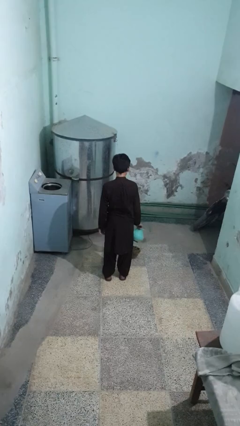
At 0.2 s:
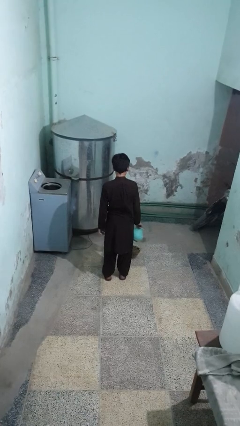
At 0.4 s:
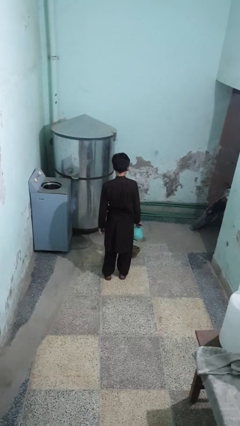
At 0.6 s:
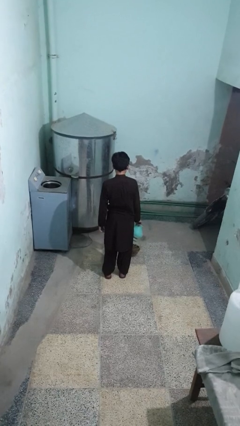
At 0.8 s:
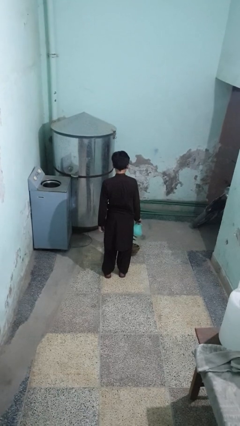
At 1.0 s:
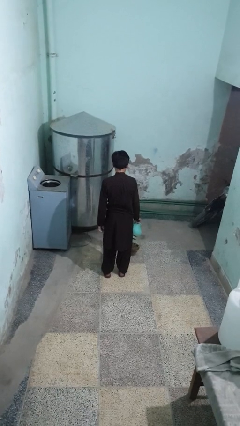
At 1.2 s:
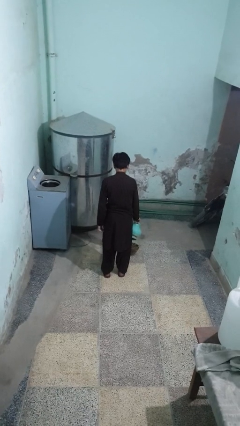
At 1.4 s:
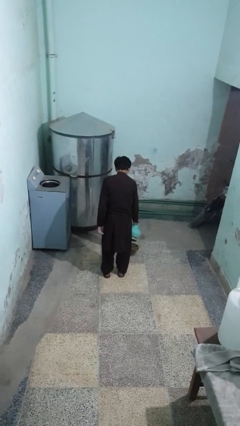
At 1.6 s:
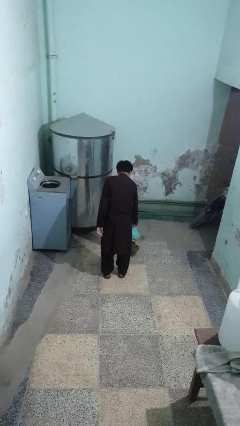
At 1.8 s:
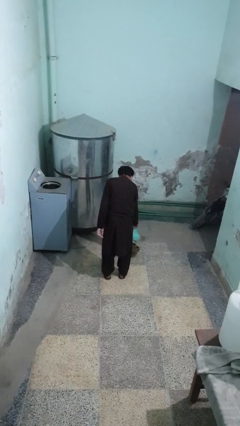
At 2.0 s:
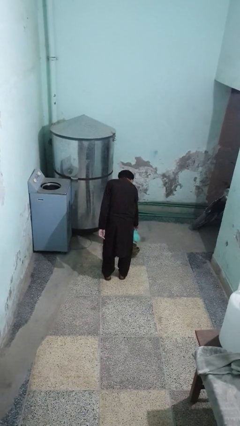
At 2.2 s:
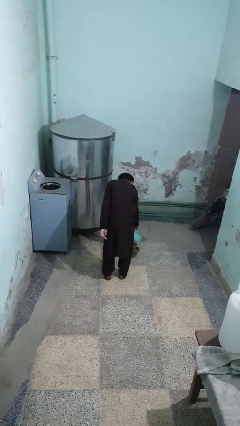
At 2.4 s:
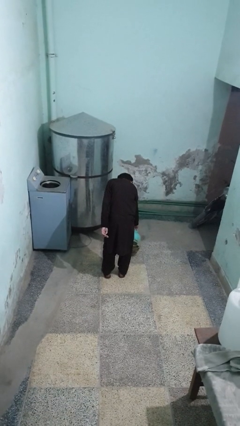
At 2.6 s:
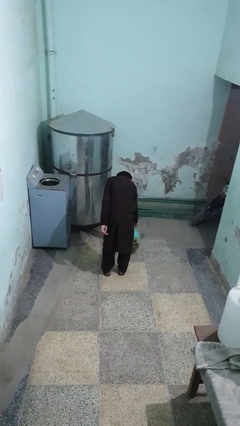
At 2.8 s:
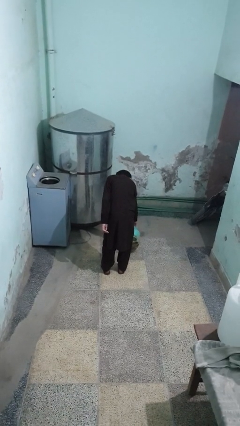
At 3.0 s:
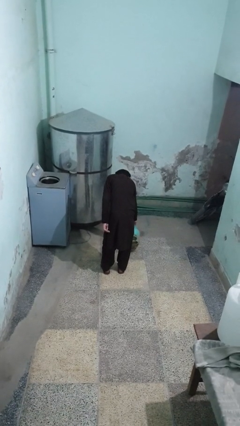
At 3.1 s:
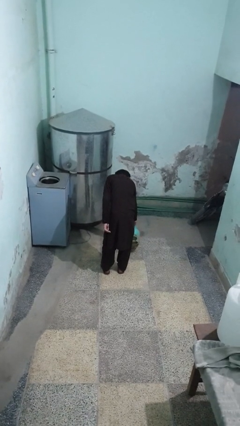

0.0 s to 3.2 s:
person waters houseplant

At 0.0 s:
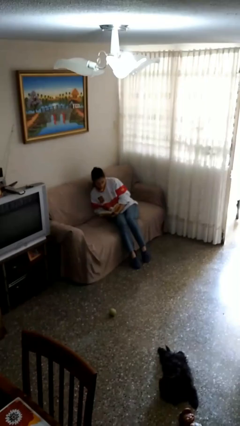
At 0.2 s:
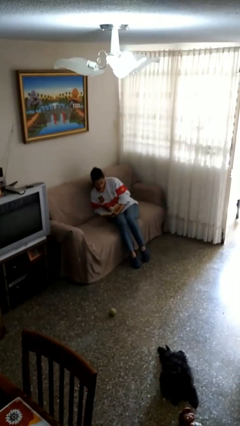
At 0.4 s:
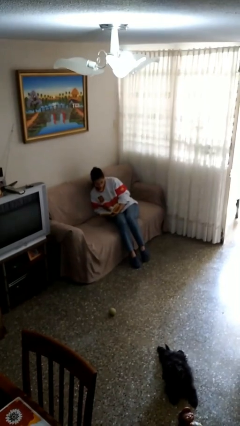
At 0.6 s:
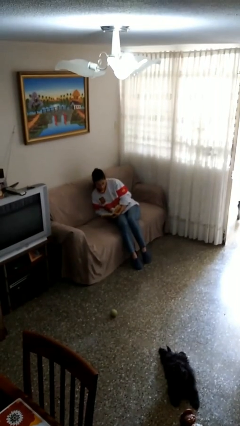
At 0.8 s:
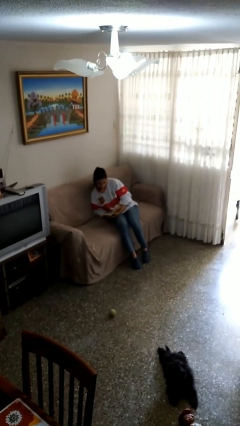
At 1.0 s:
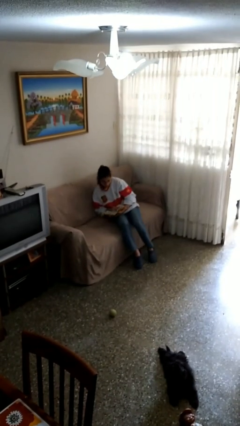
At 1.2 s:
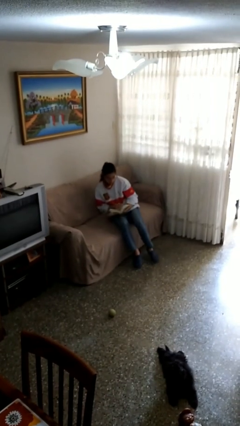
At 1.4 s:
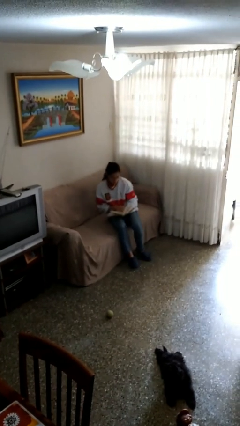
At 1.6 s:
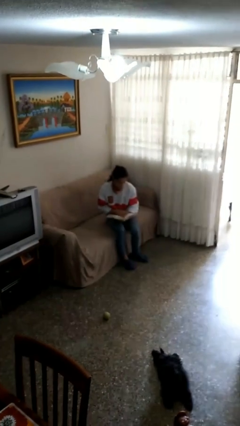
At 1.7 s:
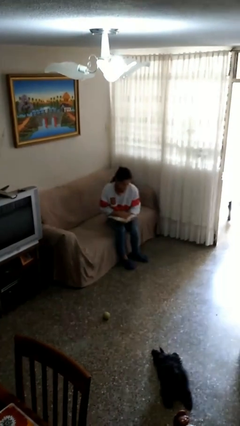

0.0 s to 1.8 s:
person reads document

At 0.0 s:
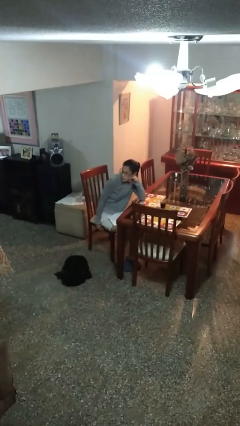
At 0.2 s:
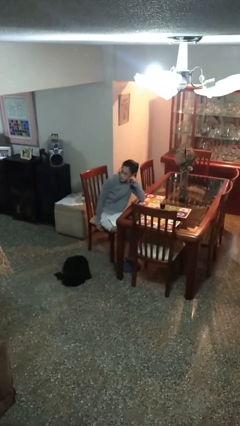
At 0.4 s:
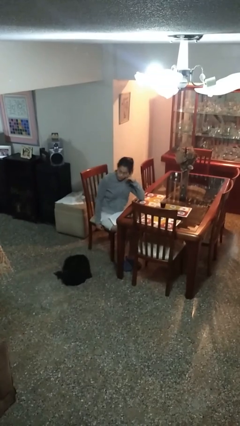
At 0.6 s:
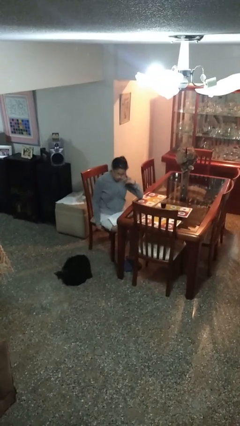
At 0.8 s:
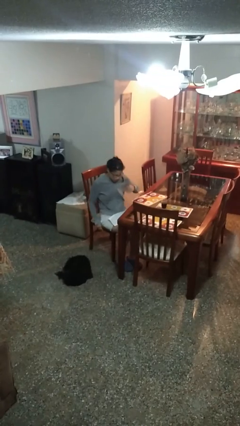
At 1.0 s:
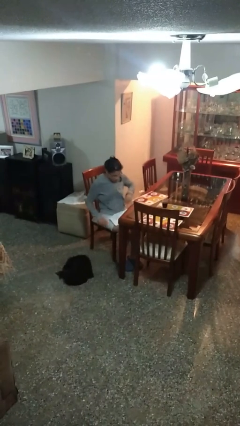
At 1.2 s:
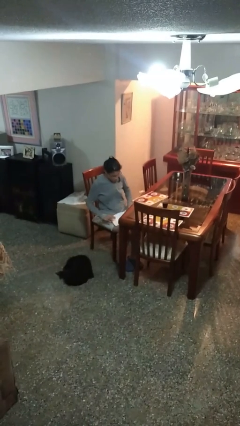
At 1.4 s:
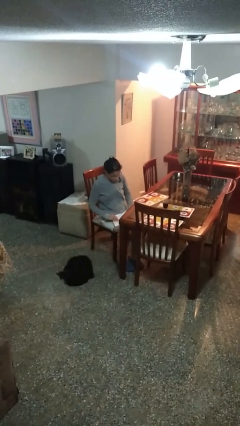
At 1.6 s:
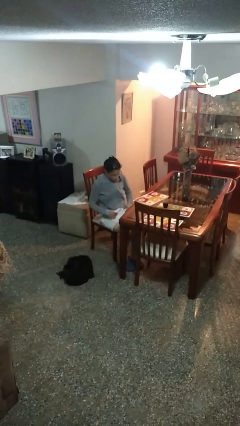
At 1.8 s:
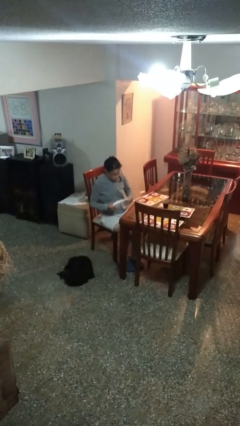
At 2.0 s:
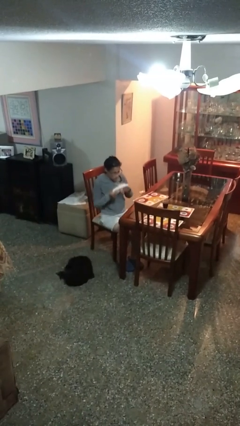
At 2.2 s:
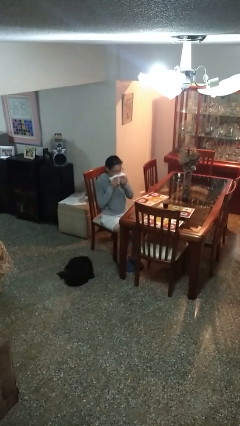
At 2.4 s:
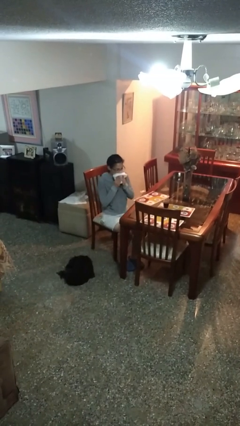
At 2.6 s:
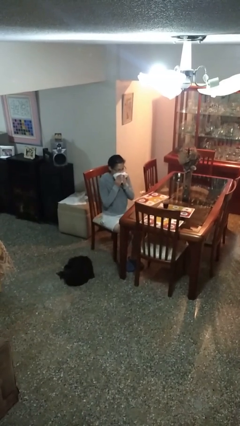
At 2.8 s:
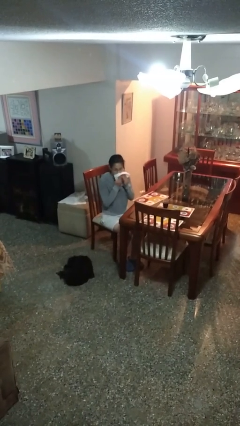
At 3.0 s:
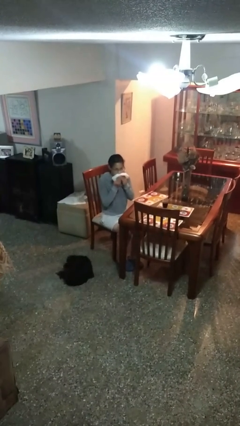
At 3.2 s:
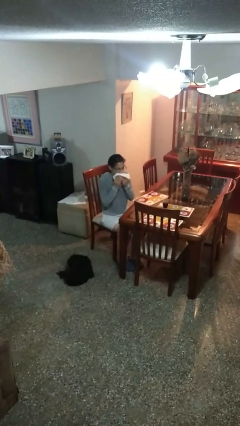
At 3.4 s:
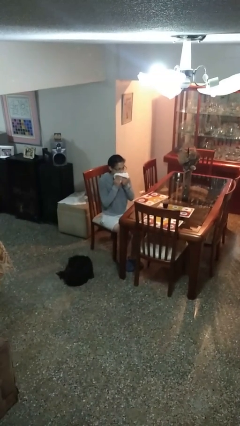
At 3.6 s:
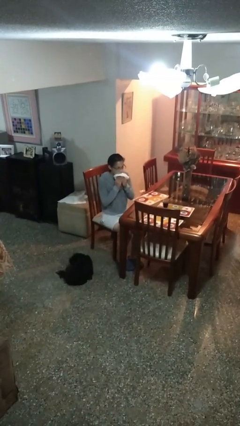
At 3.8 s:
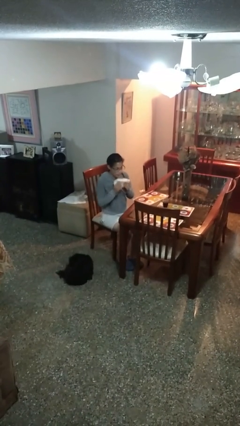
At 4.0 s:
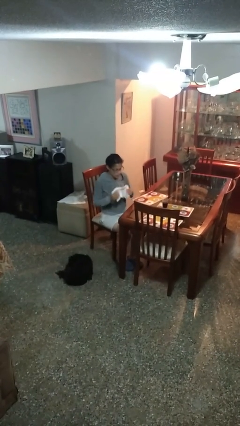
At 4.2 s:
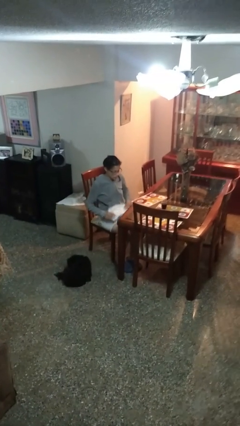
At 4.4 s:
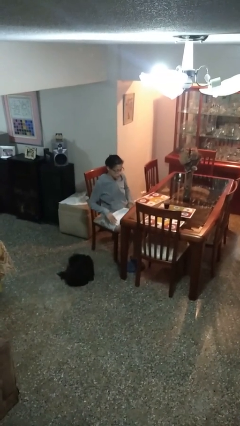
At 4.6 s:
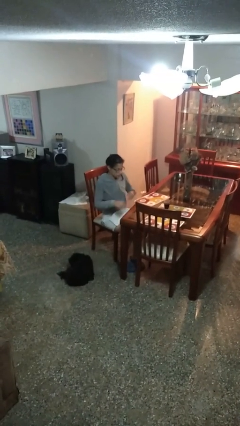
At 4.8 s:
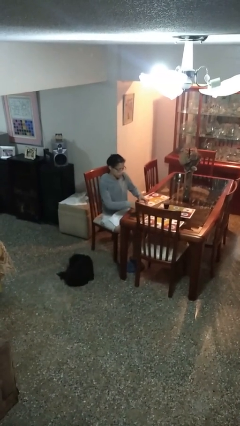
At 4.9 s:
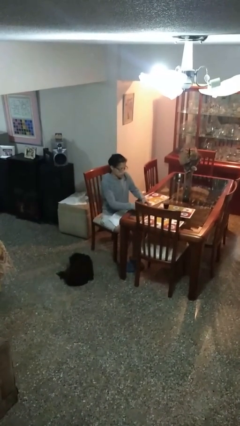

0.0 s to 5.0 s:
person wipes mouth with napkin

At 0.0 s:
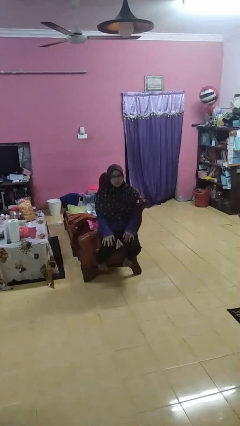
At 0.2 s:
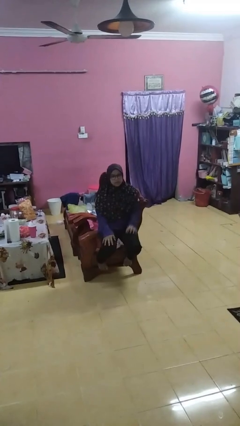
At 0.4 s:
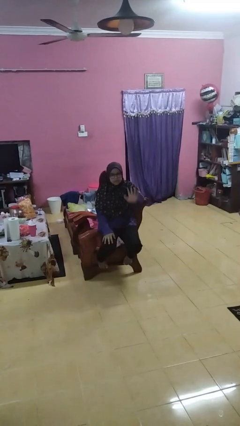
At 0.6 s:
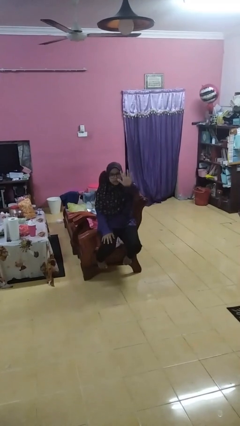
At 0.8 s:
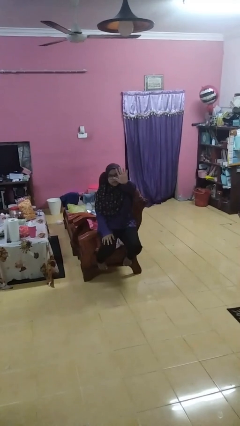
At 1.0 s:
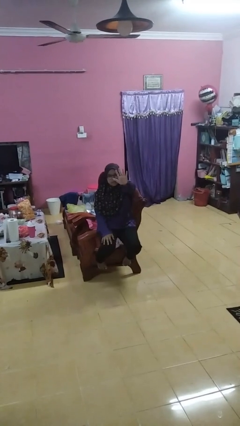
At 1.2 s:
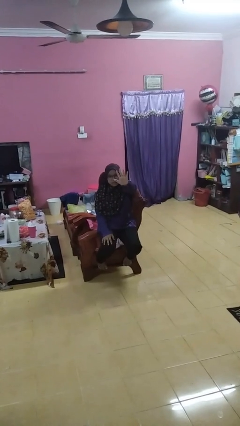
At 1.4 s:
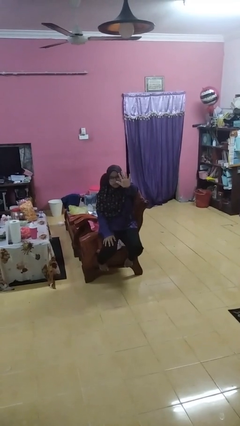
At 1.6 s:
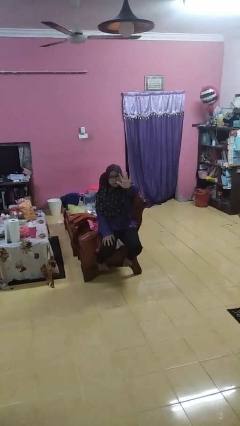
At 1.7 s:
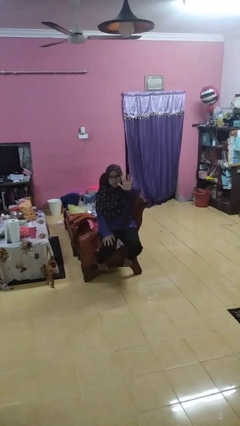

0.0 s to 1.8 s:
person gestures number five

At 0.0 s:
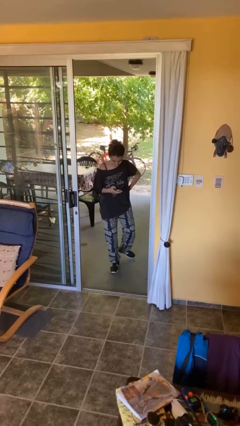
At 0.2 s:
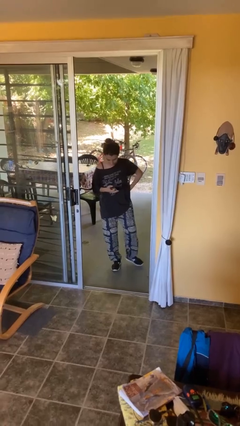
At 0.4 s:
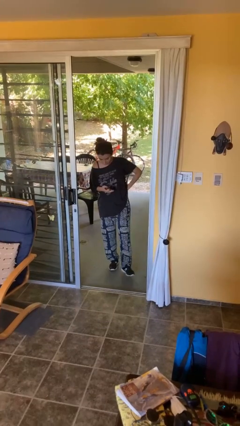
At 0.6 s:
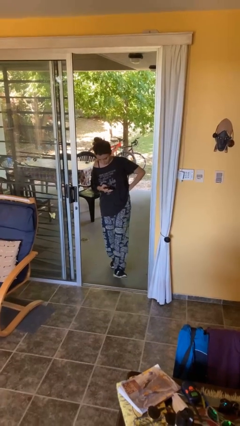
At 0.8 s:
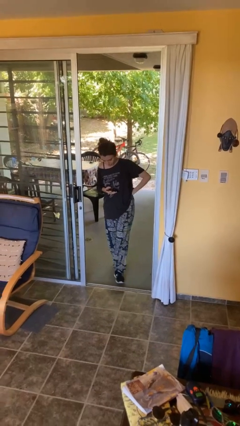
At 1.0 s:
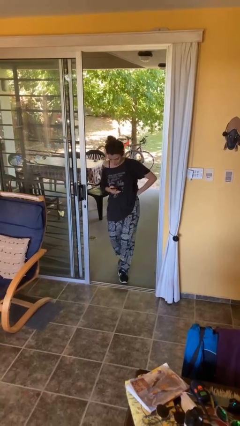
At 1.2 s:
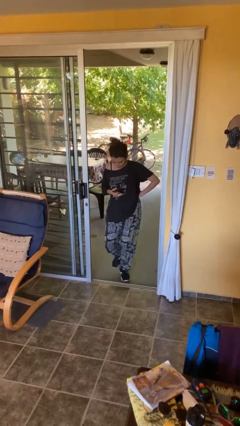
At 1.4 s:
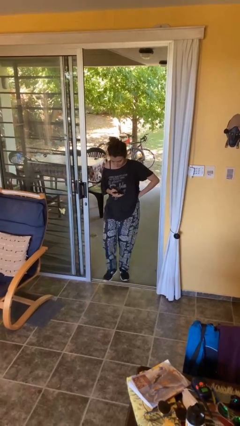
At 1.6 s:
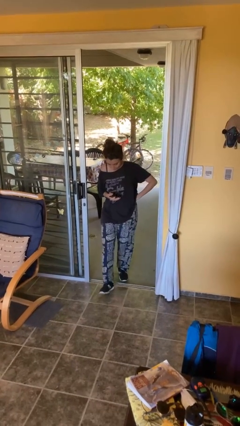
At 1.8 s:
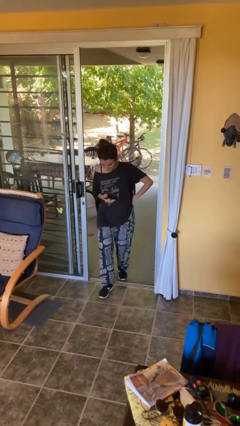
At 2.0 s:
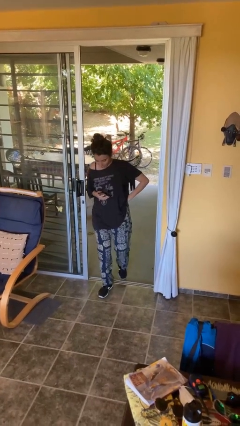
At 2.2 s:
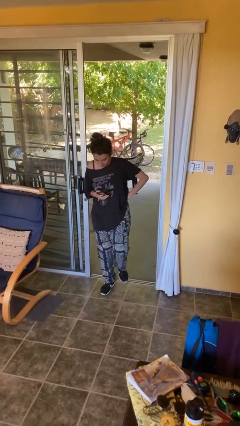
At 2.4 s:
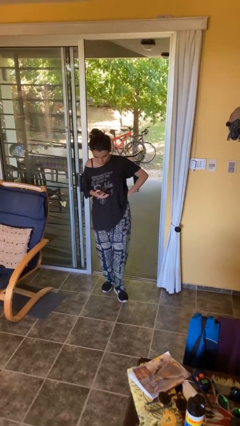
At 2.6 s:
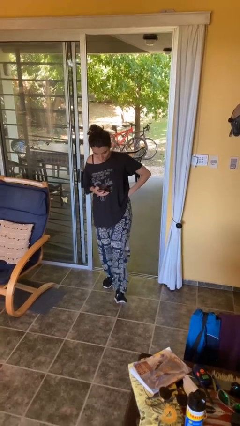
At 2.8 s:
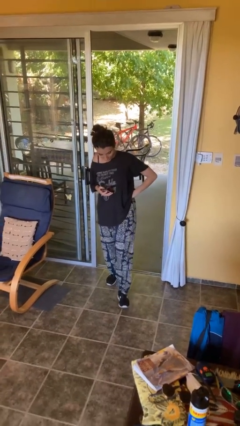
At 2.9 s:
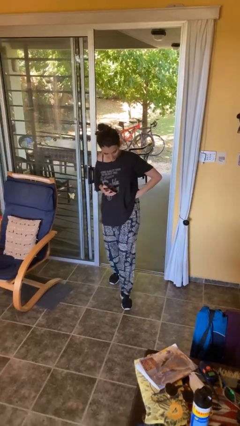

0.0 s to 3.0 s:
person enters scene through structure

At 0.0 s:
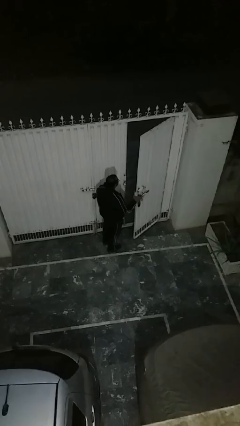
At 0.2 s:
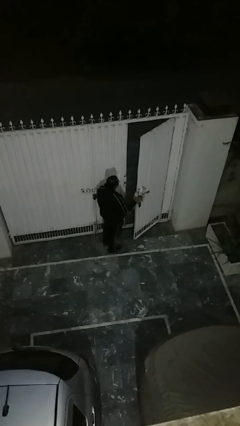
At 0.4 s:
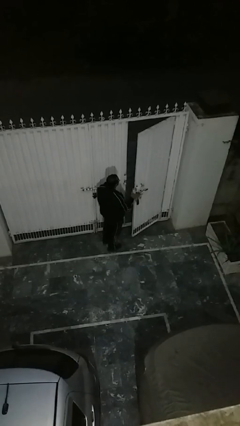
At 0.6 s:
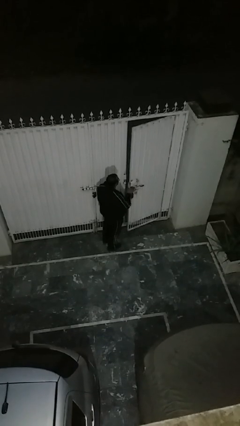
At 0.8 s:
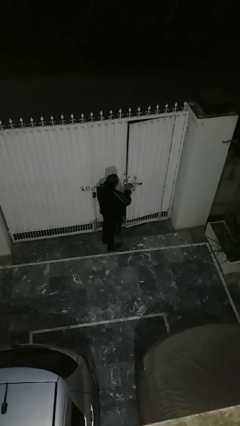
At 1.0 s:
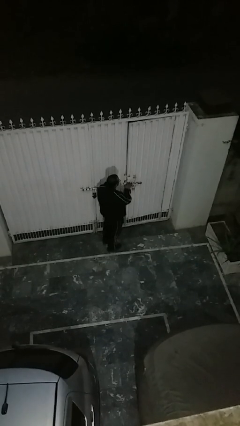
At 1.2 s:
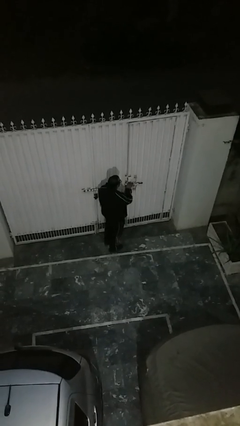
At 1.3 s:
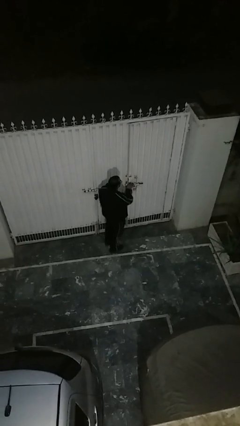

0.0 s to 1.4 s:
person closes facility door

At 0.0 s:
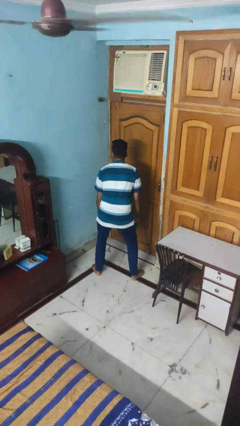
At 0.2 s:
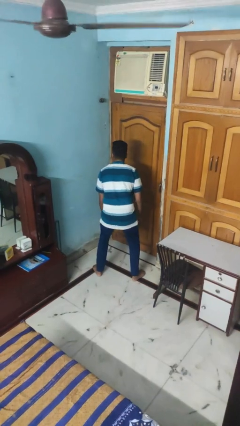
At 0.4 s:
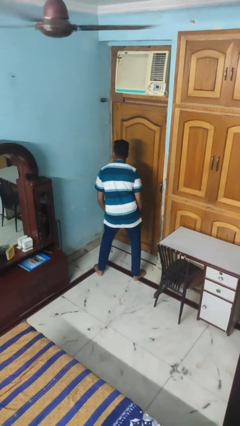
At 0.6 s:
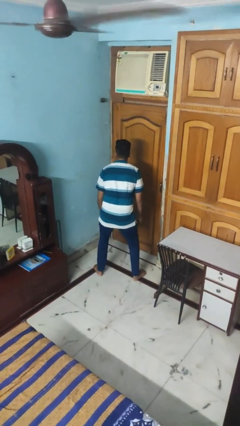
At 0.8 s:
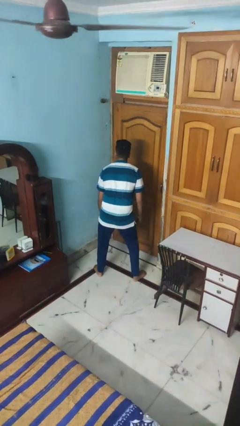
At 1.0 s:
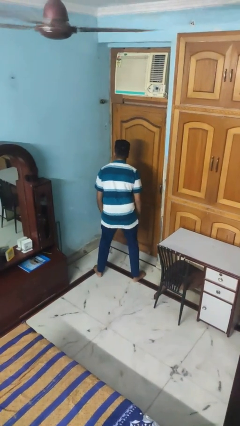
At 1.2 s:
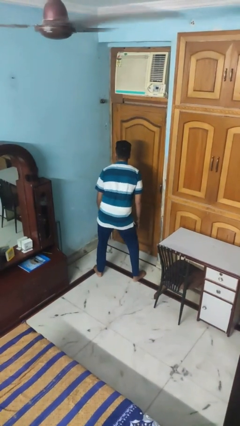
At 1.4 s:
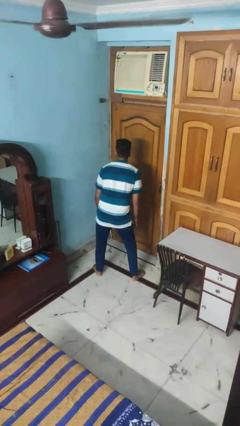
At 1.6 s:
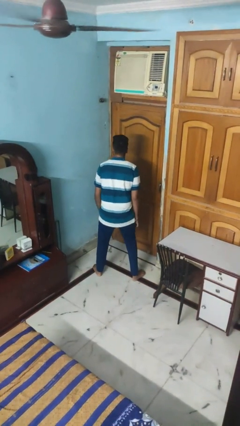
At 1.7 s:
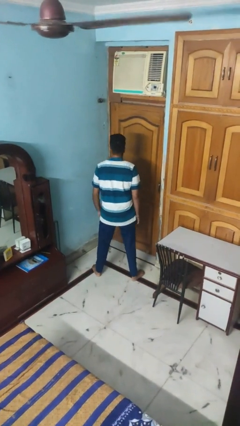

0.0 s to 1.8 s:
person wiggles hips
